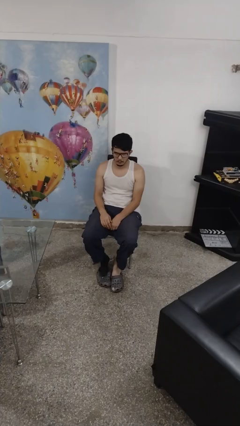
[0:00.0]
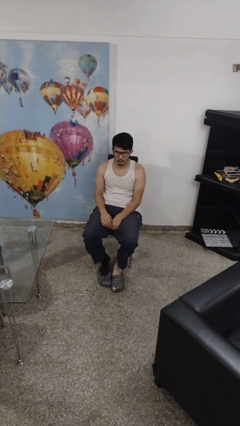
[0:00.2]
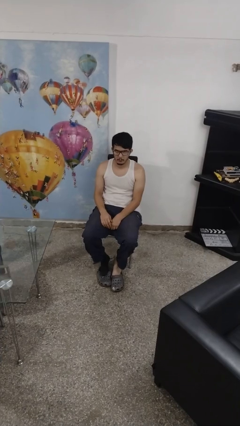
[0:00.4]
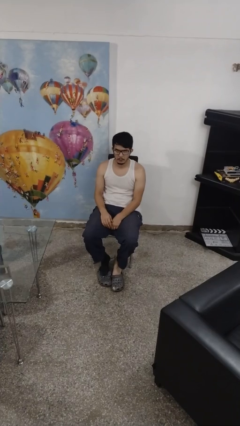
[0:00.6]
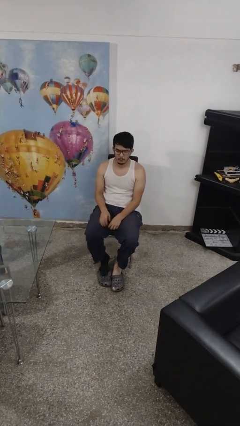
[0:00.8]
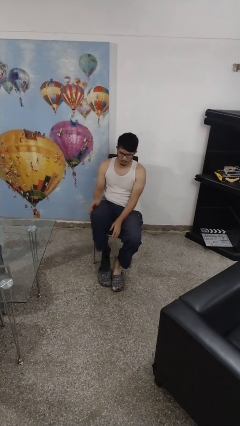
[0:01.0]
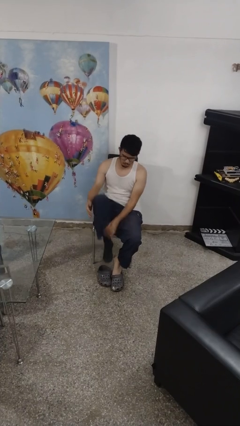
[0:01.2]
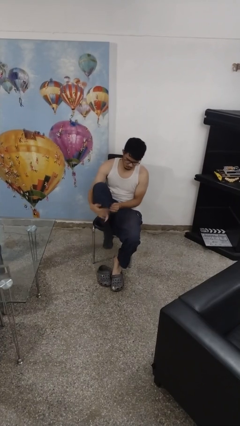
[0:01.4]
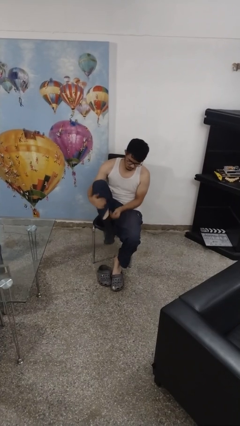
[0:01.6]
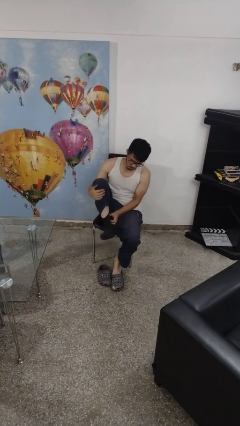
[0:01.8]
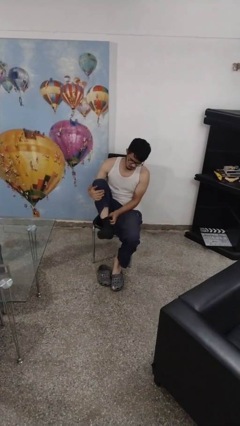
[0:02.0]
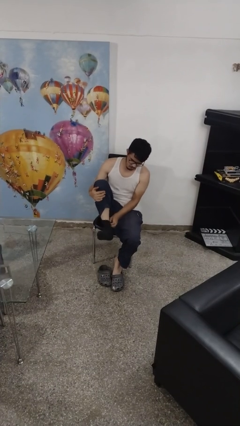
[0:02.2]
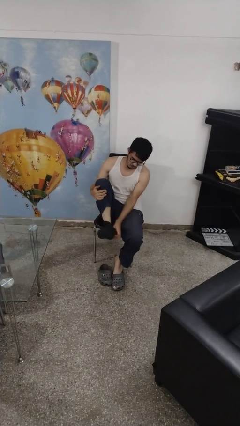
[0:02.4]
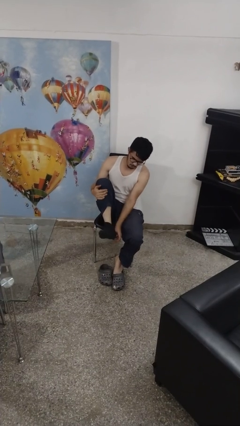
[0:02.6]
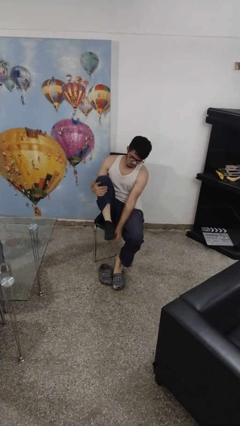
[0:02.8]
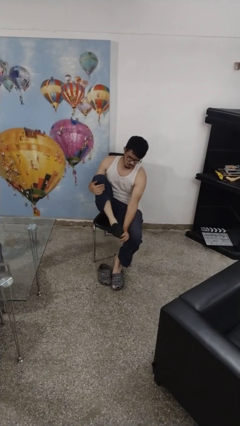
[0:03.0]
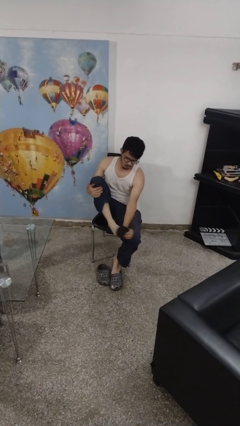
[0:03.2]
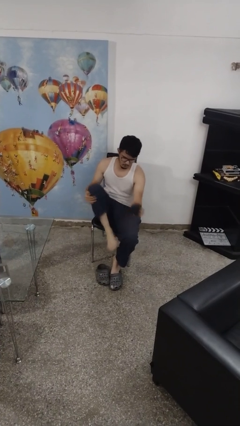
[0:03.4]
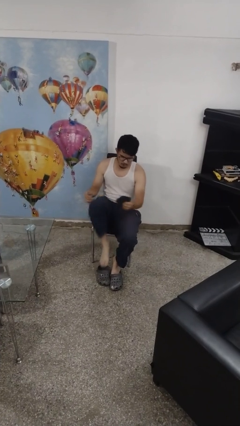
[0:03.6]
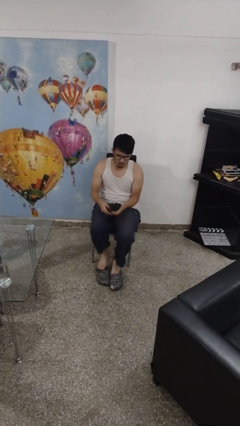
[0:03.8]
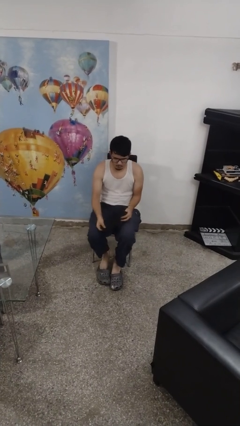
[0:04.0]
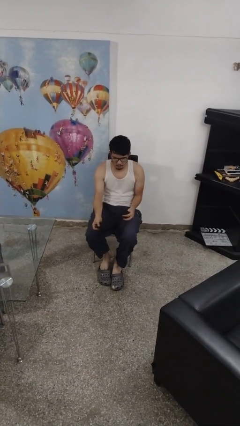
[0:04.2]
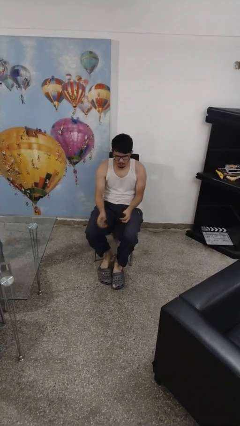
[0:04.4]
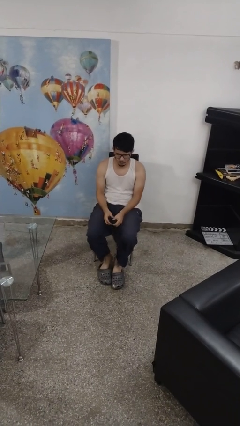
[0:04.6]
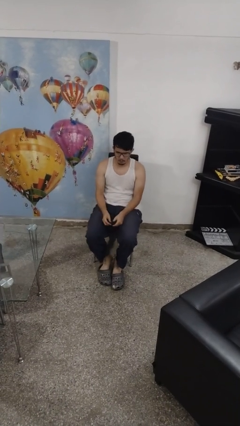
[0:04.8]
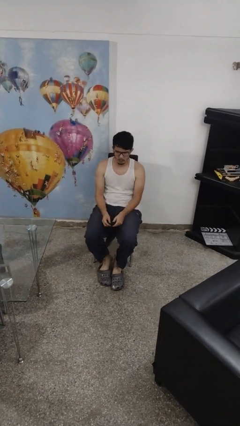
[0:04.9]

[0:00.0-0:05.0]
person takes off socks

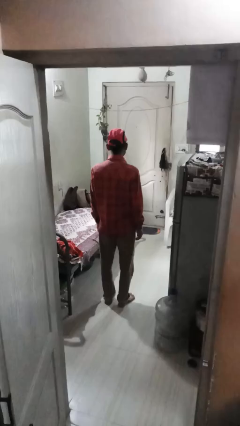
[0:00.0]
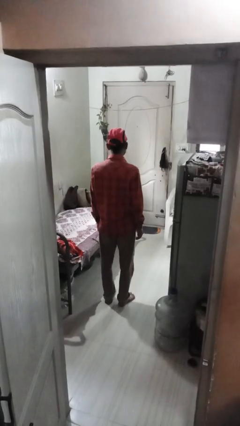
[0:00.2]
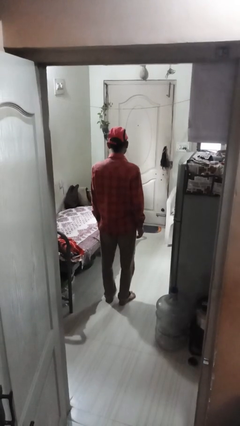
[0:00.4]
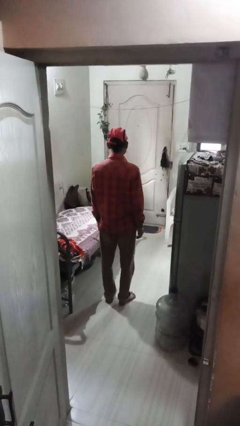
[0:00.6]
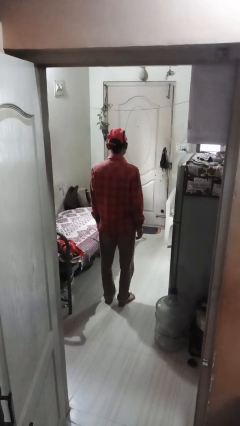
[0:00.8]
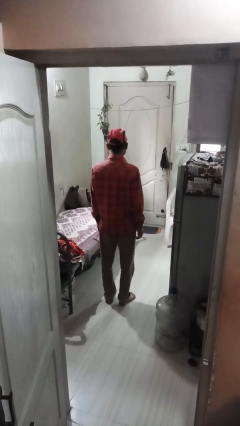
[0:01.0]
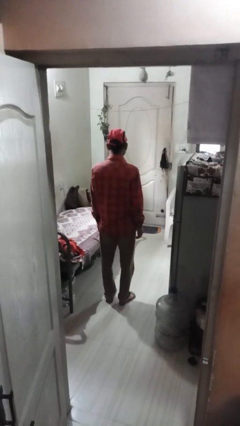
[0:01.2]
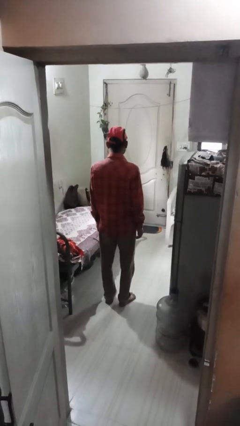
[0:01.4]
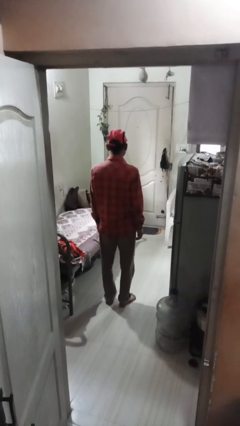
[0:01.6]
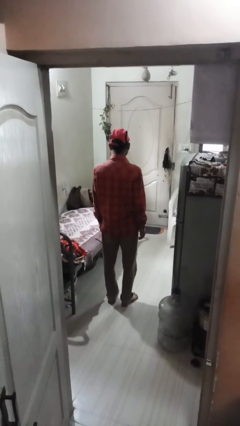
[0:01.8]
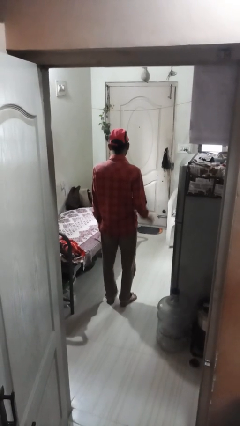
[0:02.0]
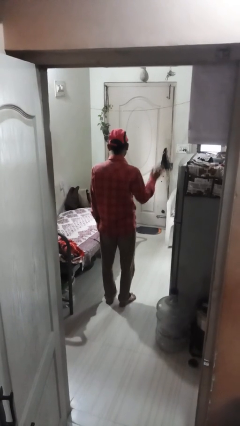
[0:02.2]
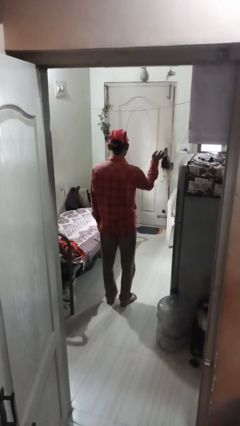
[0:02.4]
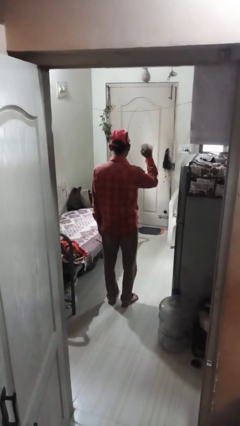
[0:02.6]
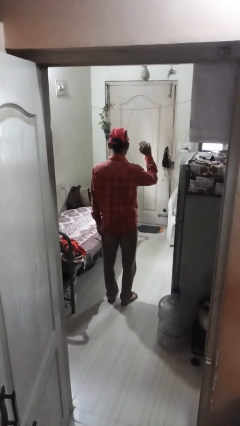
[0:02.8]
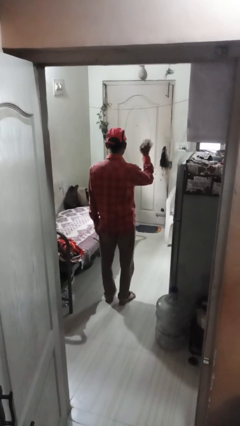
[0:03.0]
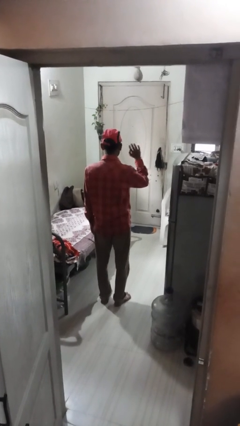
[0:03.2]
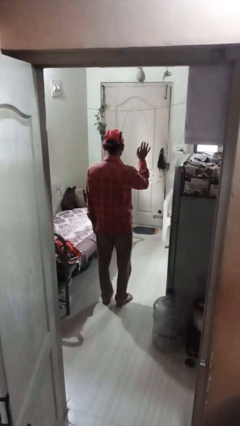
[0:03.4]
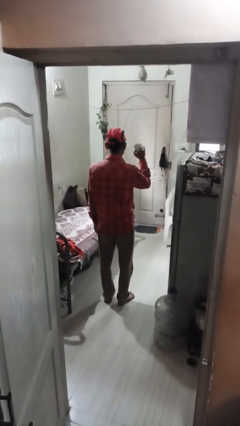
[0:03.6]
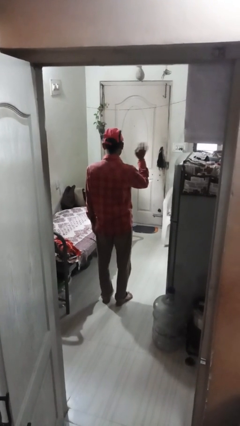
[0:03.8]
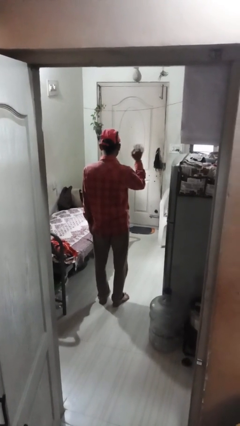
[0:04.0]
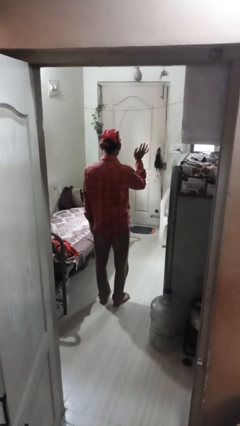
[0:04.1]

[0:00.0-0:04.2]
person waves at person

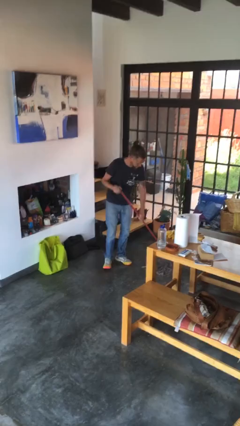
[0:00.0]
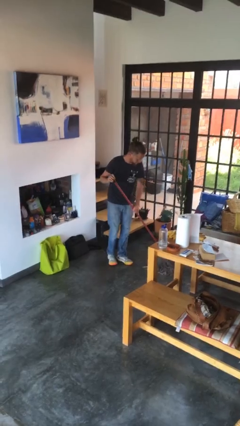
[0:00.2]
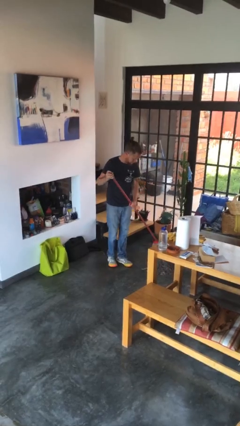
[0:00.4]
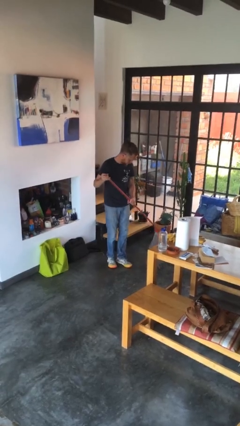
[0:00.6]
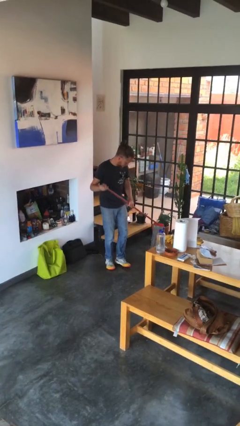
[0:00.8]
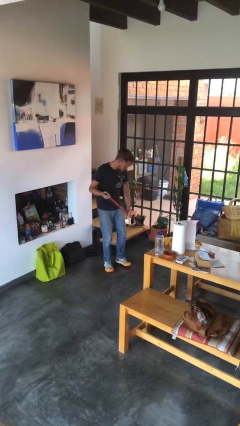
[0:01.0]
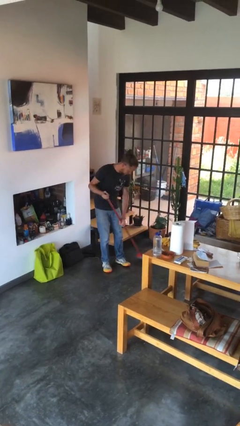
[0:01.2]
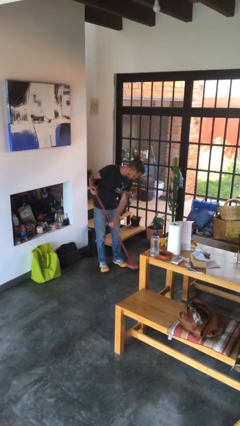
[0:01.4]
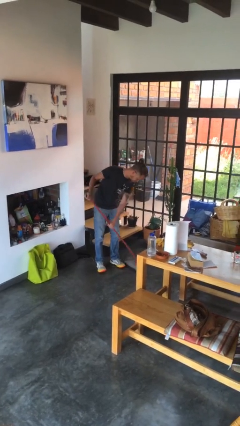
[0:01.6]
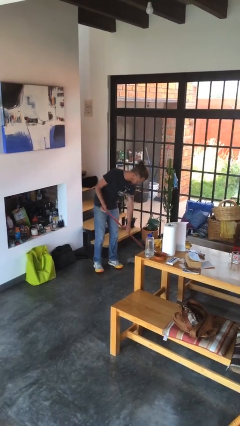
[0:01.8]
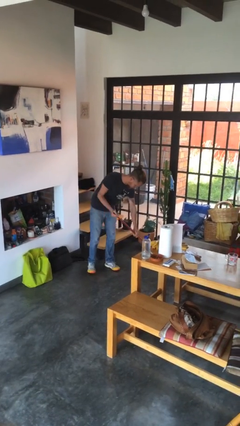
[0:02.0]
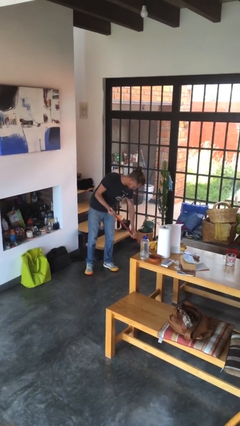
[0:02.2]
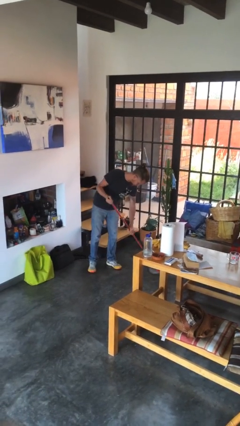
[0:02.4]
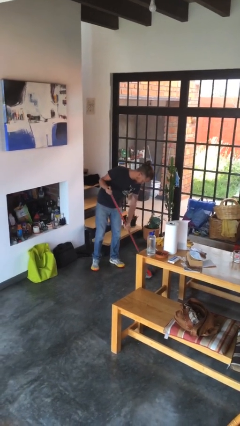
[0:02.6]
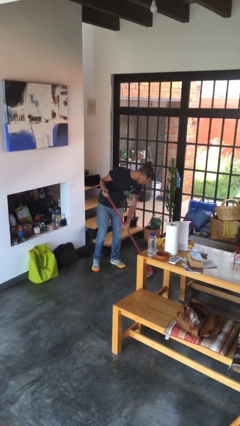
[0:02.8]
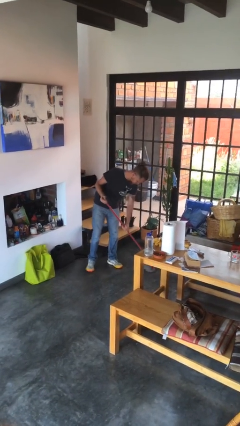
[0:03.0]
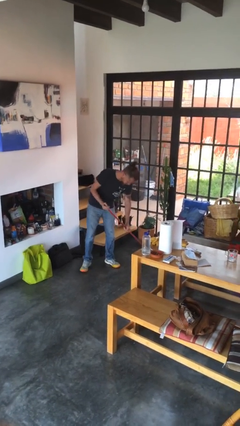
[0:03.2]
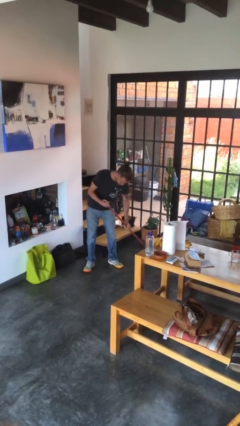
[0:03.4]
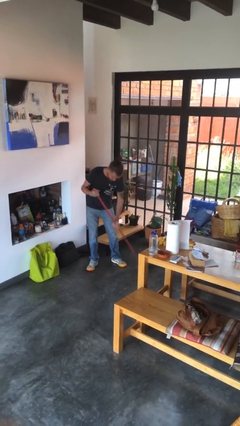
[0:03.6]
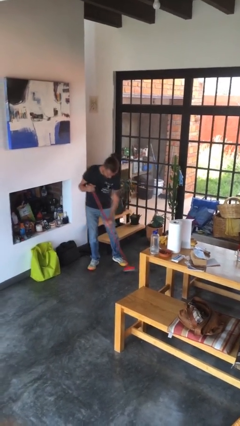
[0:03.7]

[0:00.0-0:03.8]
person mops

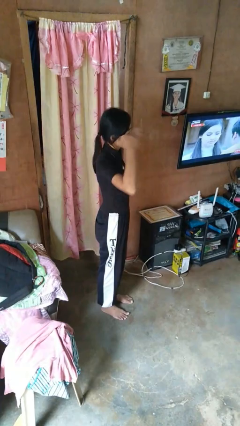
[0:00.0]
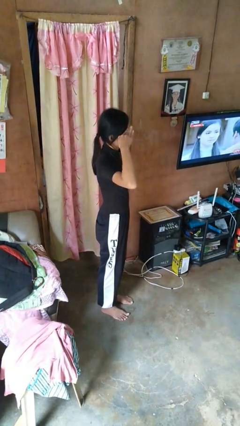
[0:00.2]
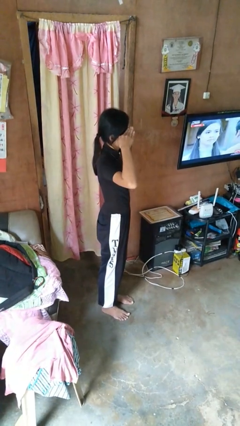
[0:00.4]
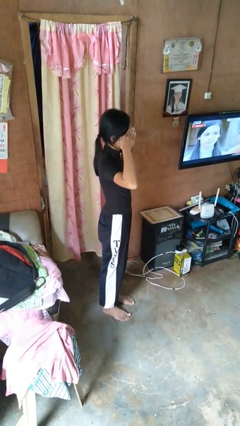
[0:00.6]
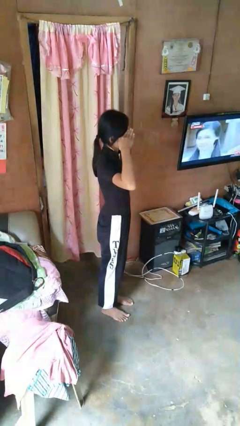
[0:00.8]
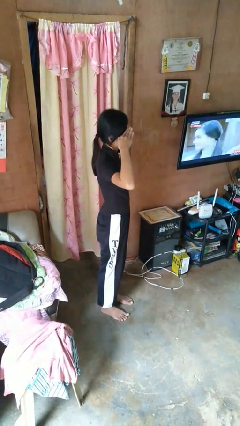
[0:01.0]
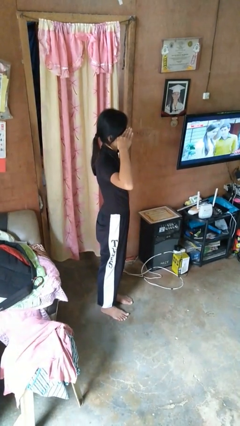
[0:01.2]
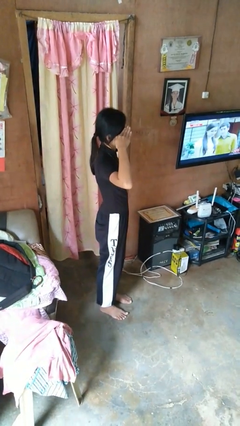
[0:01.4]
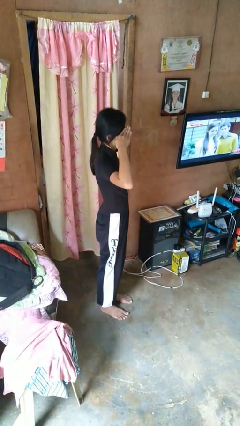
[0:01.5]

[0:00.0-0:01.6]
person salutes

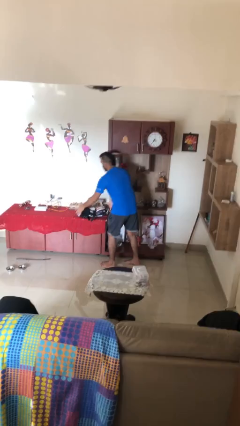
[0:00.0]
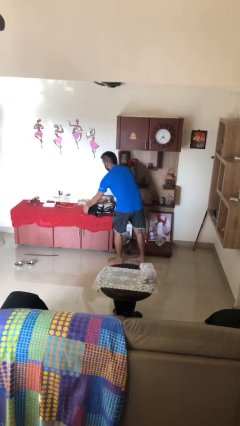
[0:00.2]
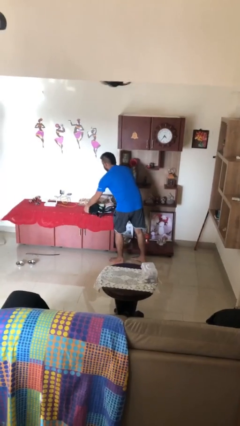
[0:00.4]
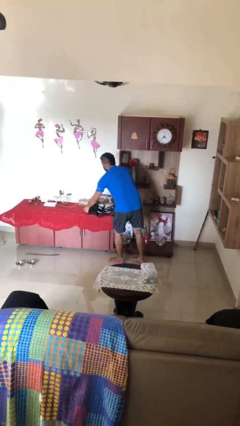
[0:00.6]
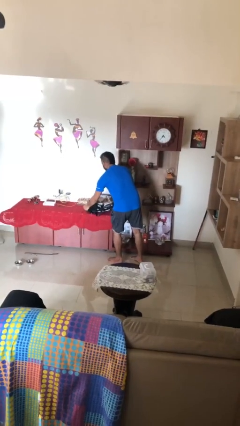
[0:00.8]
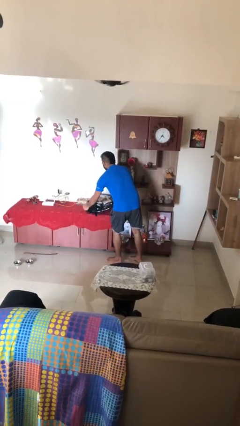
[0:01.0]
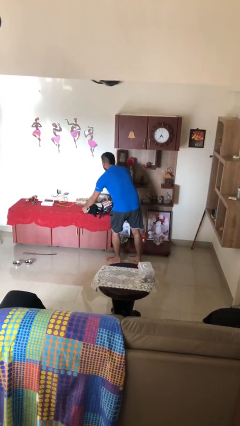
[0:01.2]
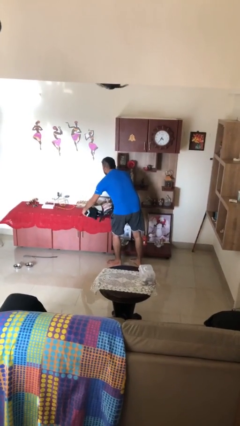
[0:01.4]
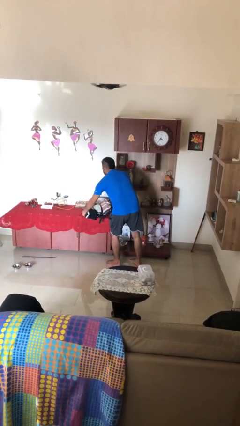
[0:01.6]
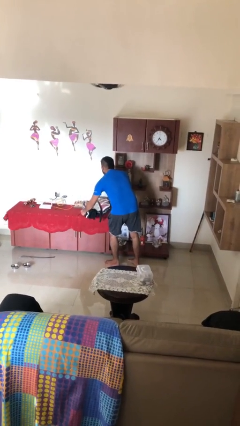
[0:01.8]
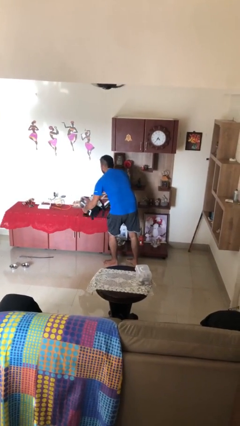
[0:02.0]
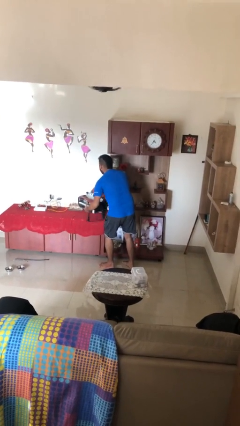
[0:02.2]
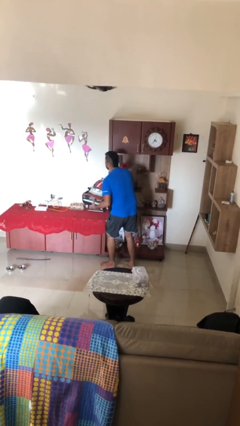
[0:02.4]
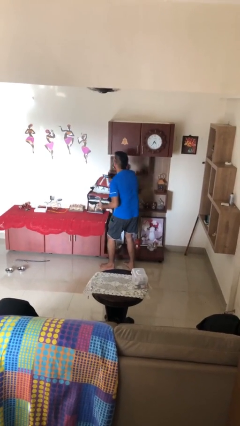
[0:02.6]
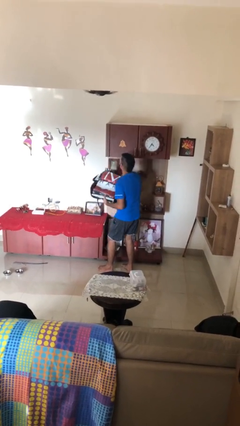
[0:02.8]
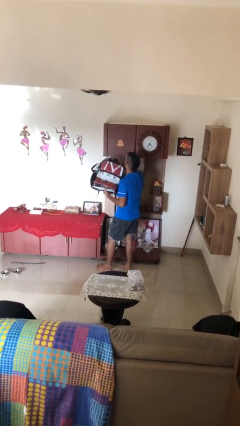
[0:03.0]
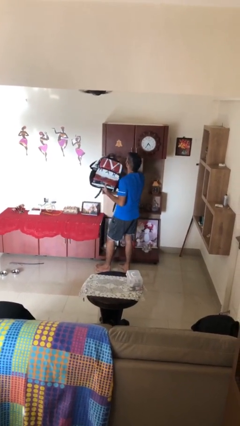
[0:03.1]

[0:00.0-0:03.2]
person picks up object from table
